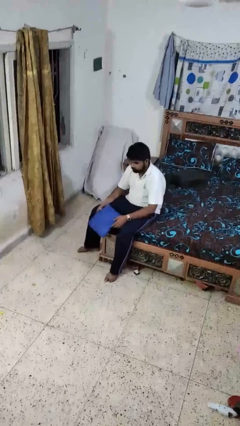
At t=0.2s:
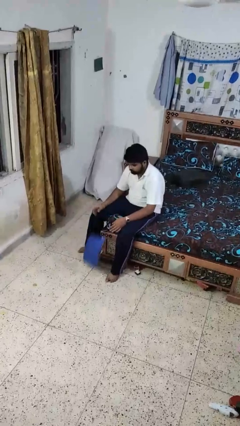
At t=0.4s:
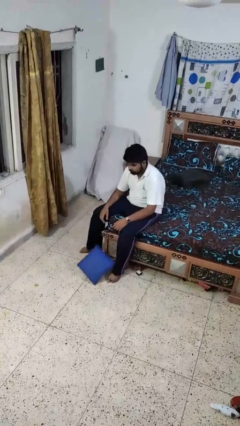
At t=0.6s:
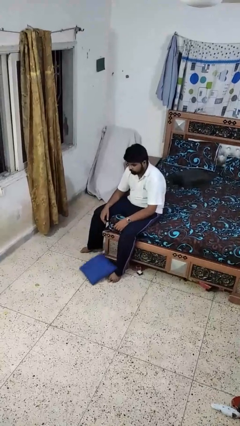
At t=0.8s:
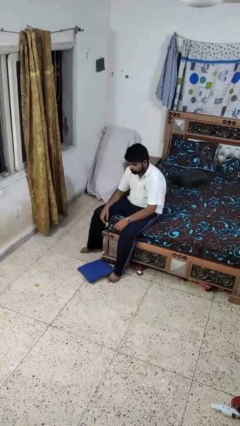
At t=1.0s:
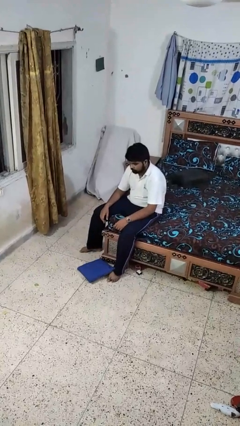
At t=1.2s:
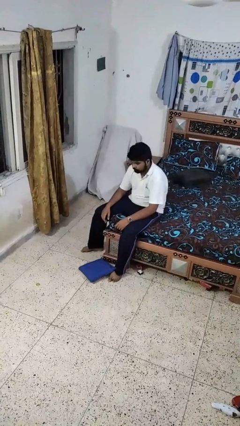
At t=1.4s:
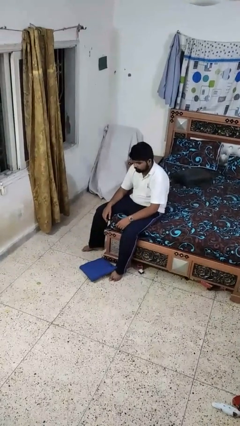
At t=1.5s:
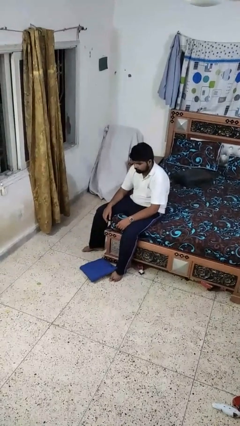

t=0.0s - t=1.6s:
person drops object

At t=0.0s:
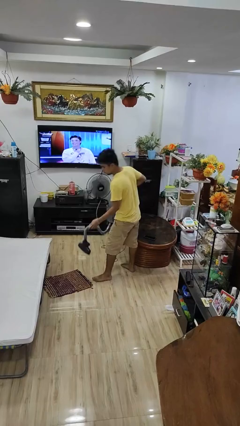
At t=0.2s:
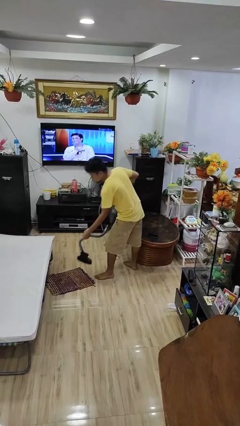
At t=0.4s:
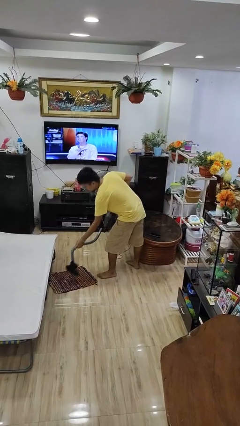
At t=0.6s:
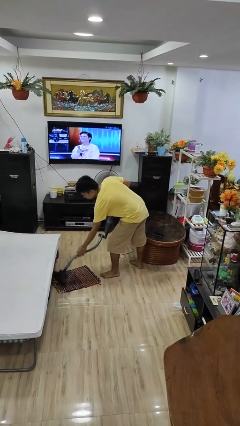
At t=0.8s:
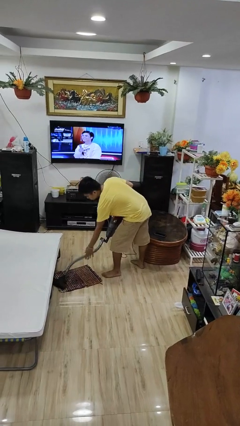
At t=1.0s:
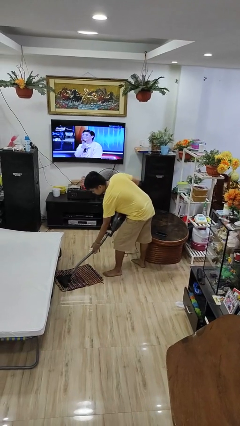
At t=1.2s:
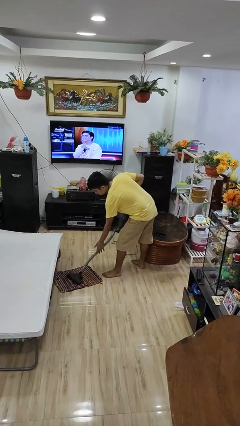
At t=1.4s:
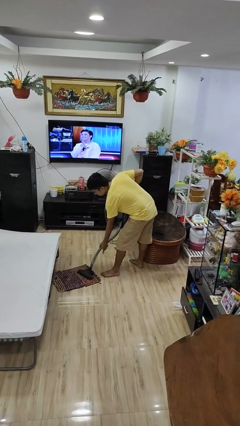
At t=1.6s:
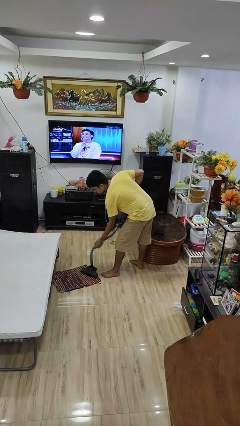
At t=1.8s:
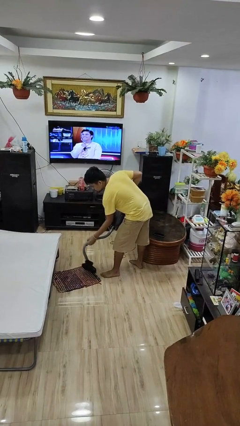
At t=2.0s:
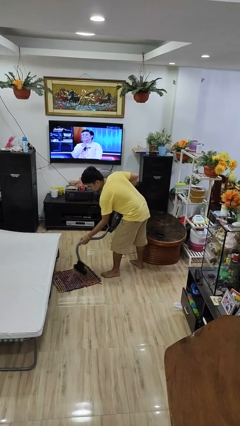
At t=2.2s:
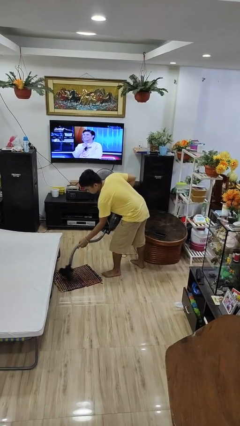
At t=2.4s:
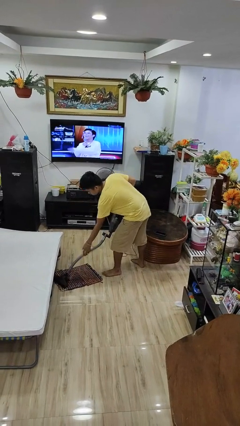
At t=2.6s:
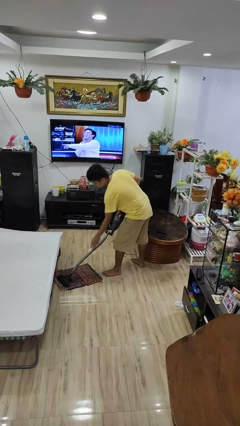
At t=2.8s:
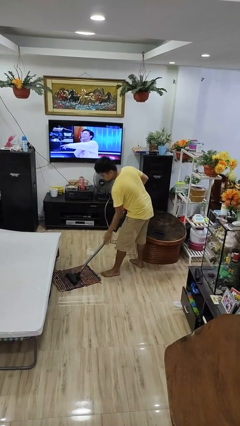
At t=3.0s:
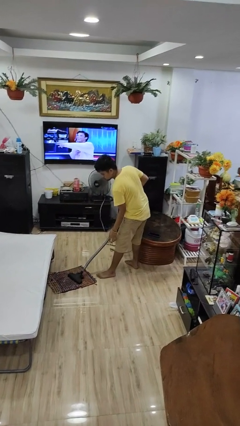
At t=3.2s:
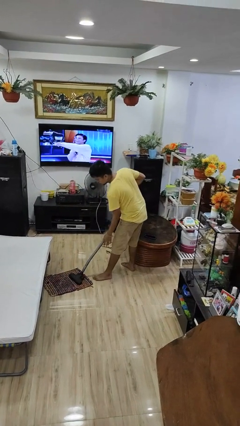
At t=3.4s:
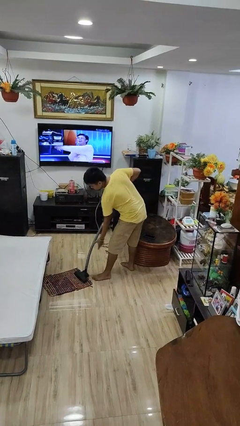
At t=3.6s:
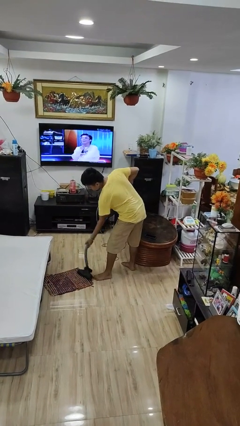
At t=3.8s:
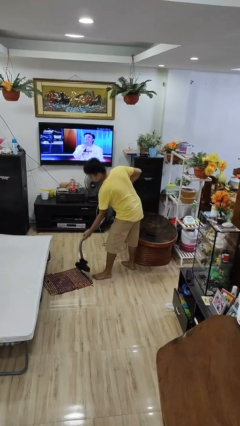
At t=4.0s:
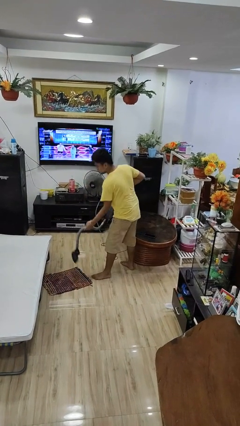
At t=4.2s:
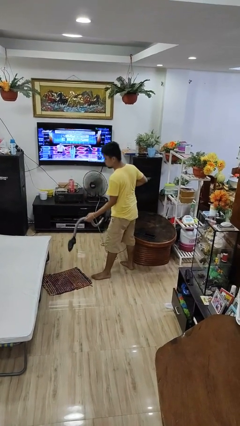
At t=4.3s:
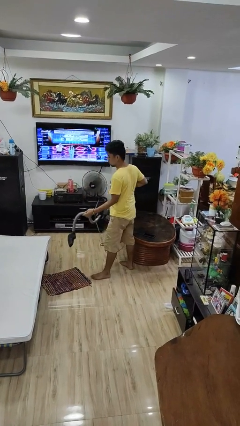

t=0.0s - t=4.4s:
person vacuums carpet

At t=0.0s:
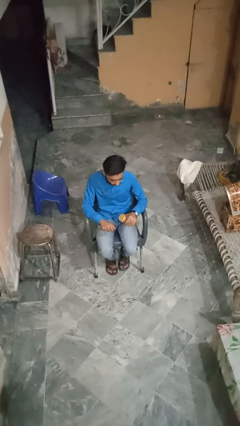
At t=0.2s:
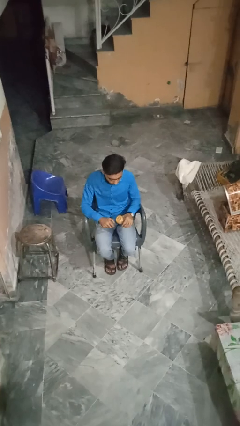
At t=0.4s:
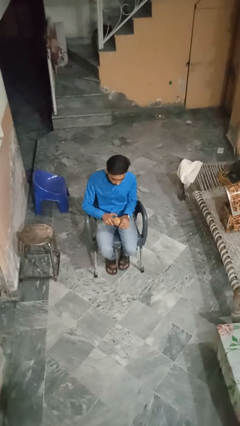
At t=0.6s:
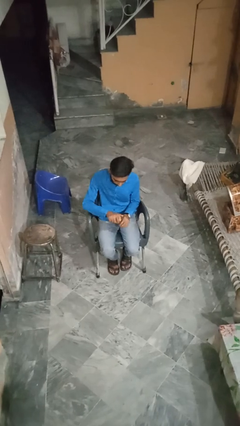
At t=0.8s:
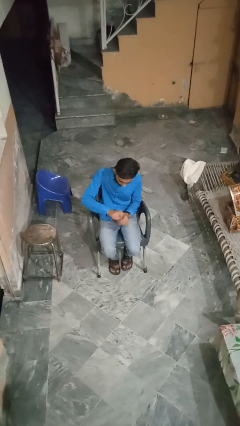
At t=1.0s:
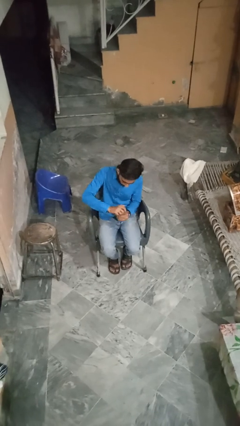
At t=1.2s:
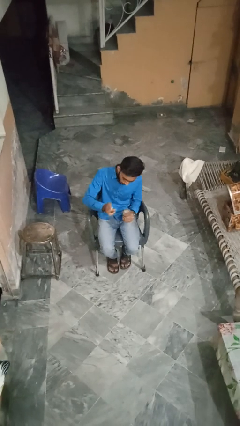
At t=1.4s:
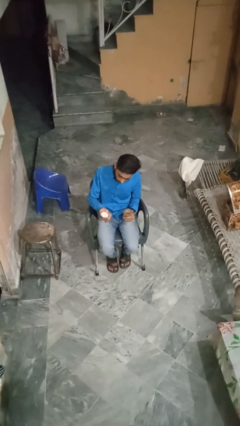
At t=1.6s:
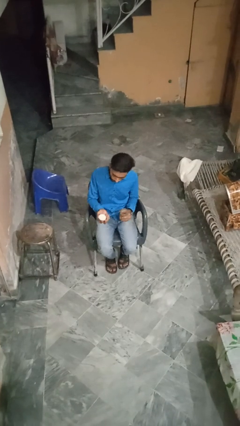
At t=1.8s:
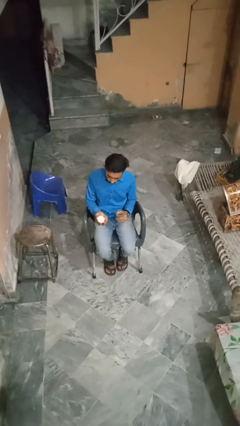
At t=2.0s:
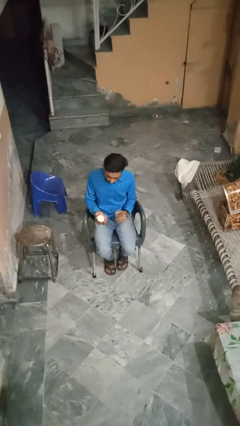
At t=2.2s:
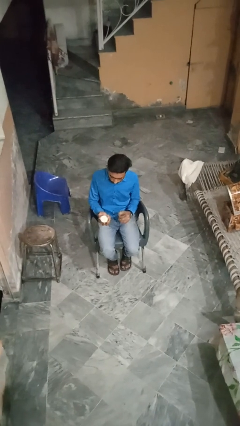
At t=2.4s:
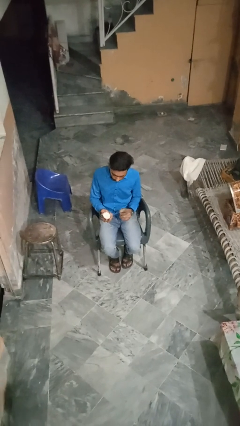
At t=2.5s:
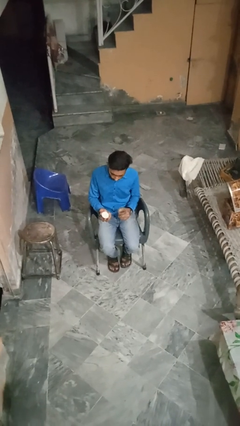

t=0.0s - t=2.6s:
person opens jar

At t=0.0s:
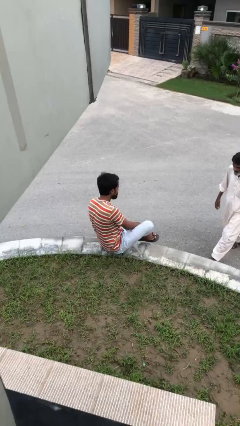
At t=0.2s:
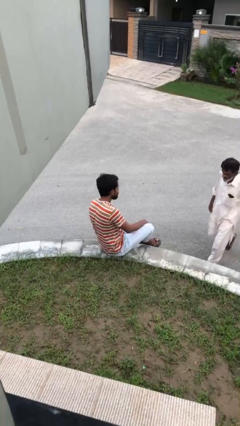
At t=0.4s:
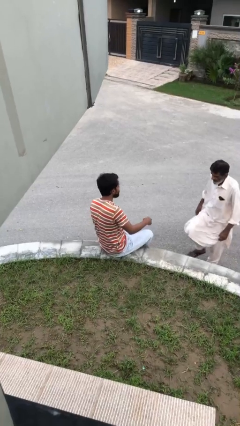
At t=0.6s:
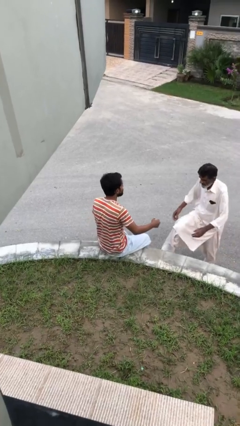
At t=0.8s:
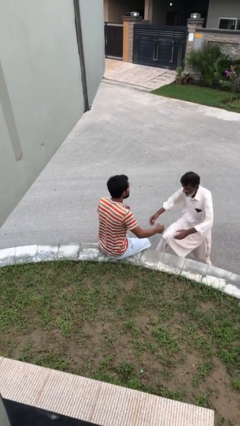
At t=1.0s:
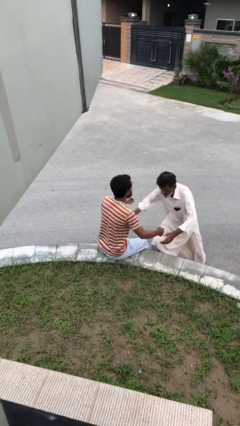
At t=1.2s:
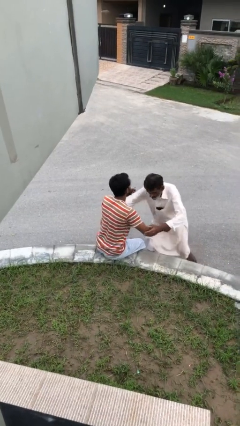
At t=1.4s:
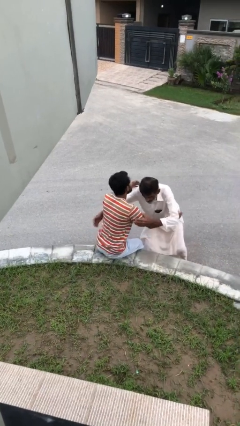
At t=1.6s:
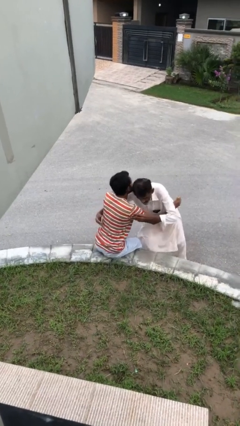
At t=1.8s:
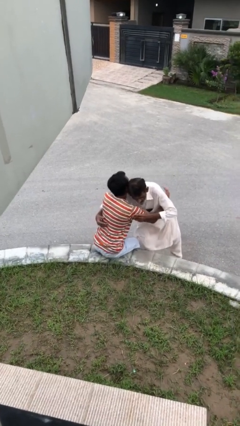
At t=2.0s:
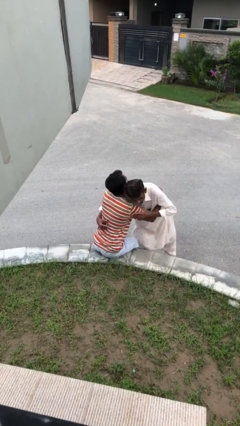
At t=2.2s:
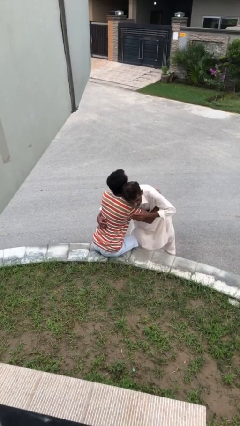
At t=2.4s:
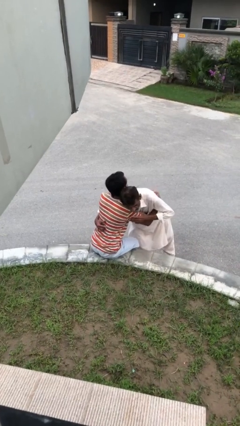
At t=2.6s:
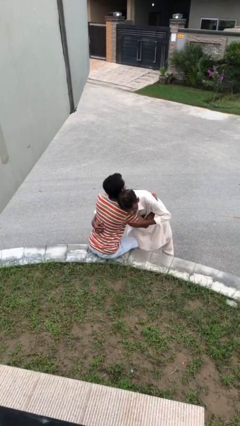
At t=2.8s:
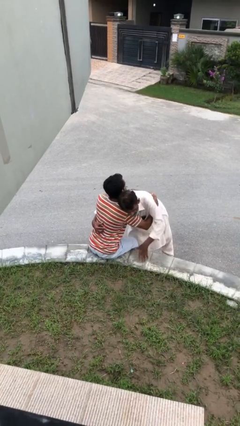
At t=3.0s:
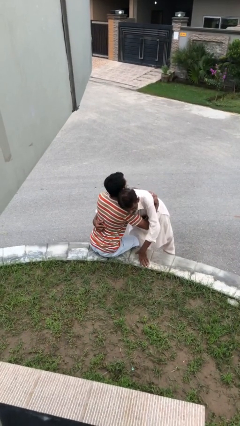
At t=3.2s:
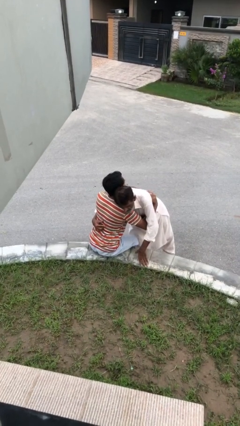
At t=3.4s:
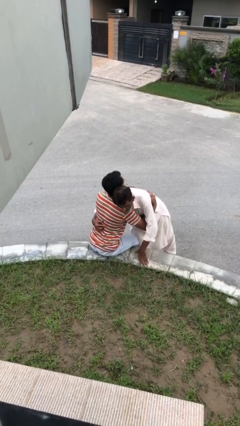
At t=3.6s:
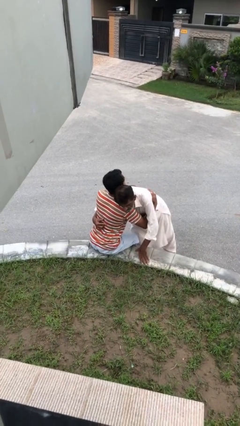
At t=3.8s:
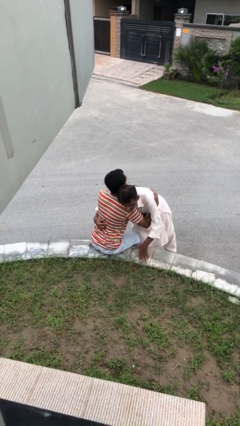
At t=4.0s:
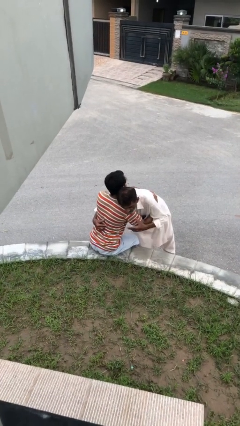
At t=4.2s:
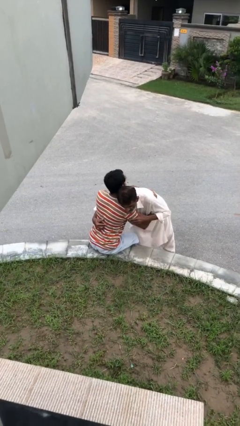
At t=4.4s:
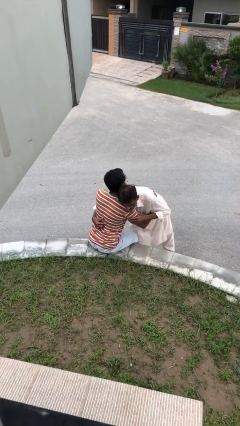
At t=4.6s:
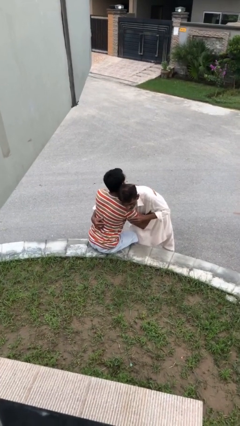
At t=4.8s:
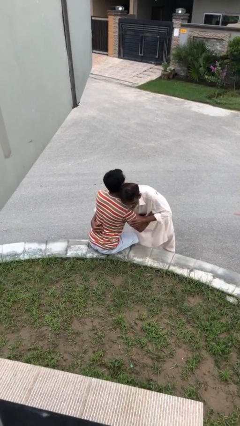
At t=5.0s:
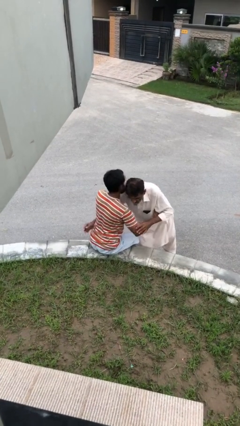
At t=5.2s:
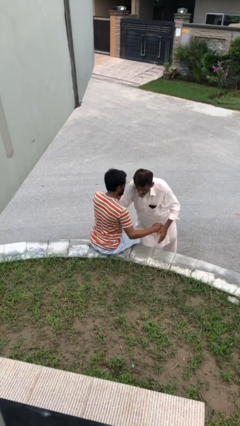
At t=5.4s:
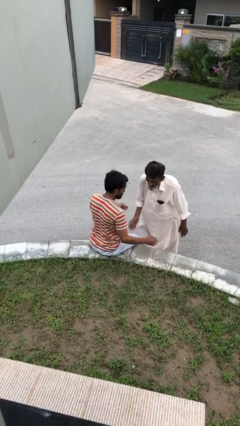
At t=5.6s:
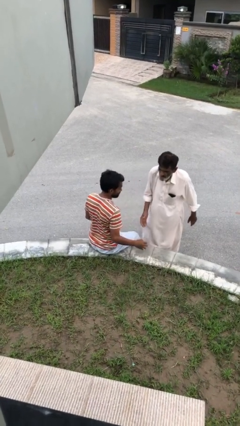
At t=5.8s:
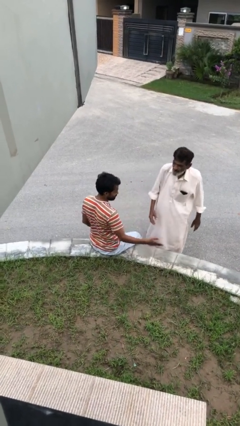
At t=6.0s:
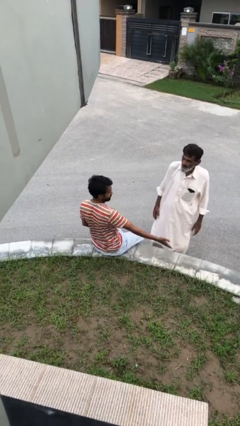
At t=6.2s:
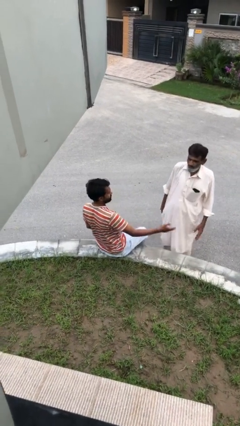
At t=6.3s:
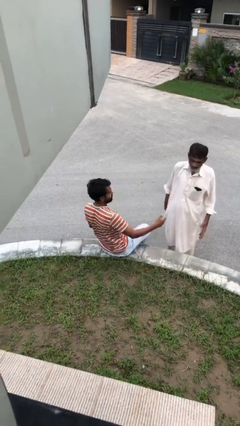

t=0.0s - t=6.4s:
person embraces person

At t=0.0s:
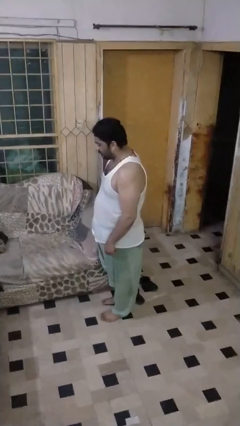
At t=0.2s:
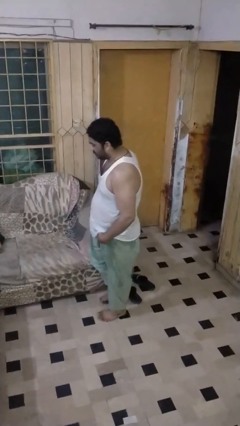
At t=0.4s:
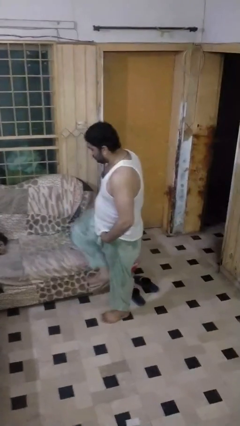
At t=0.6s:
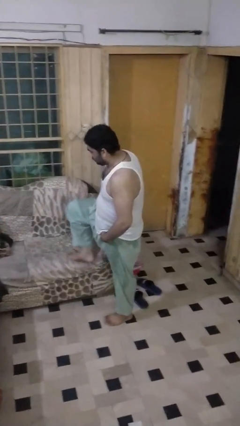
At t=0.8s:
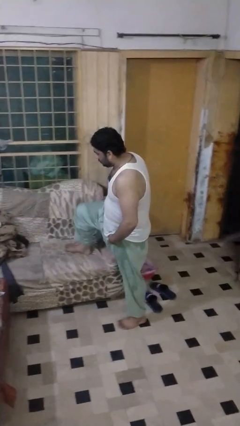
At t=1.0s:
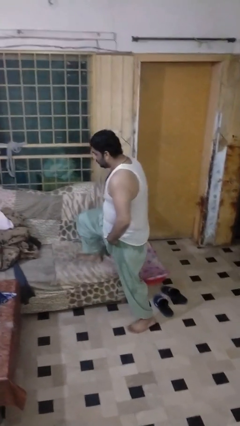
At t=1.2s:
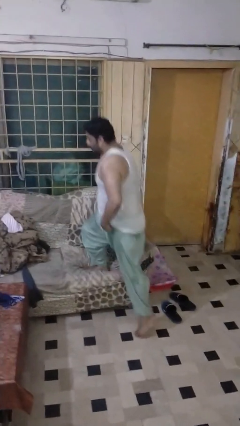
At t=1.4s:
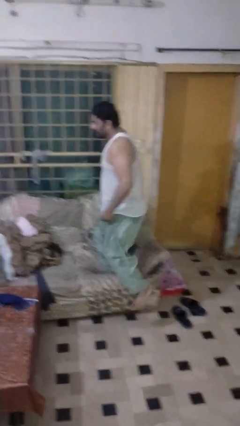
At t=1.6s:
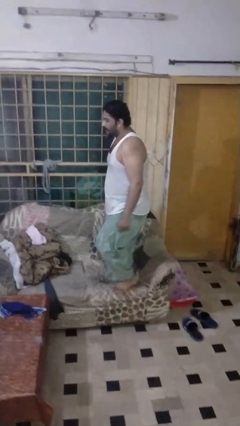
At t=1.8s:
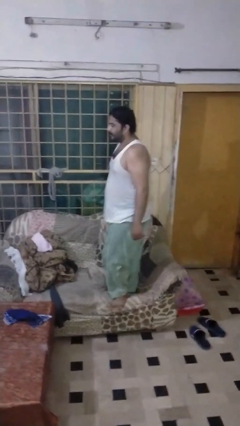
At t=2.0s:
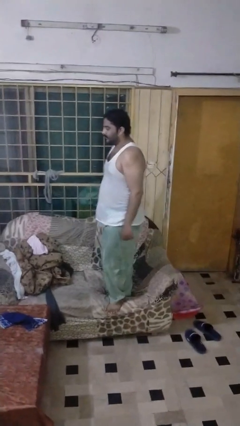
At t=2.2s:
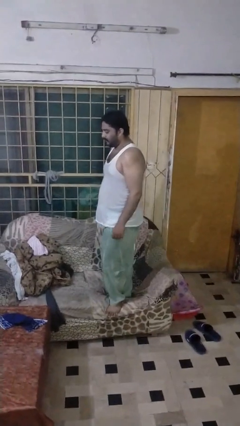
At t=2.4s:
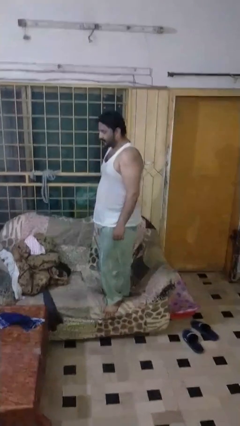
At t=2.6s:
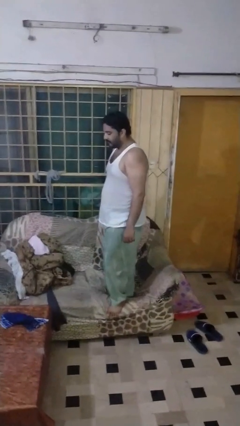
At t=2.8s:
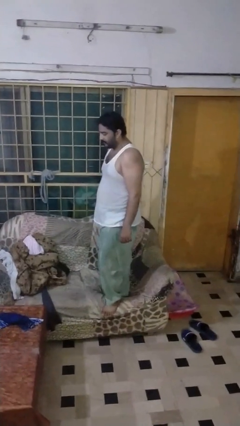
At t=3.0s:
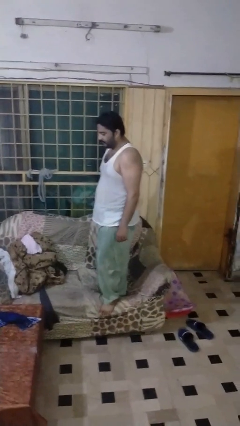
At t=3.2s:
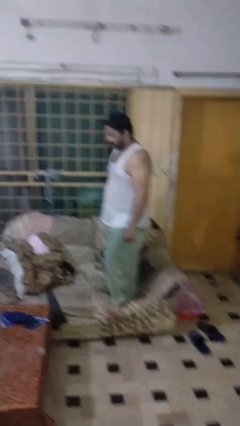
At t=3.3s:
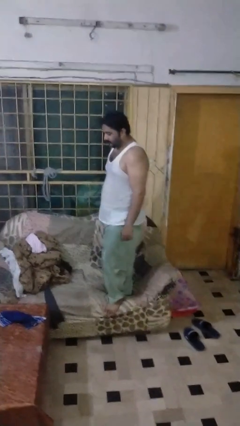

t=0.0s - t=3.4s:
person climbs on couch
